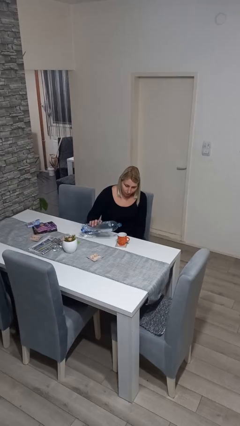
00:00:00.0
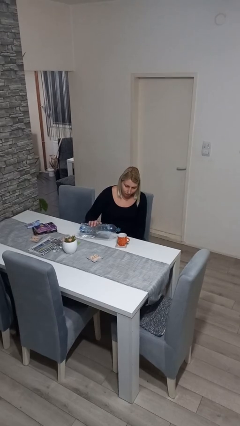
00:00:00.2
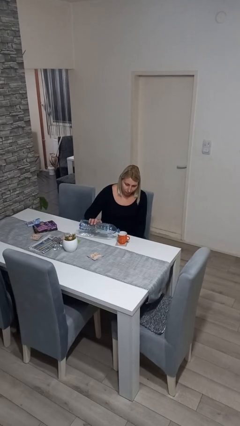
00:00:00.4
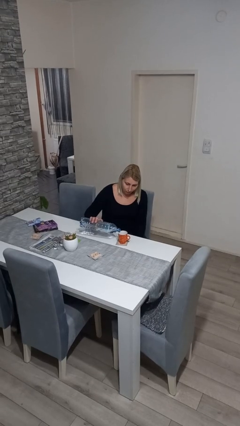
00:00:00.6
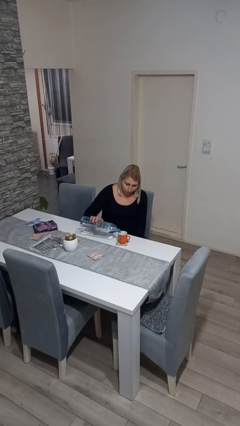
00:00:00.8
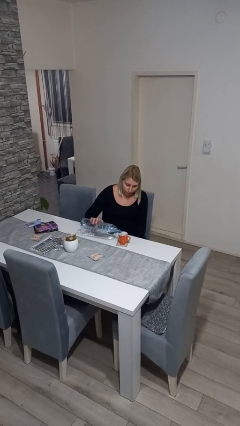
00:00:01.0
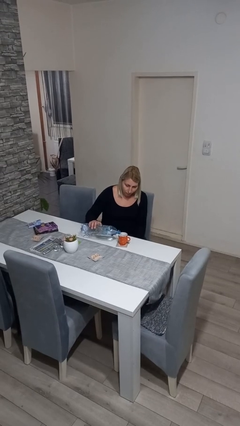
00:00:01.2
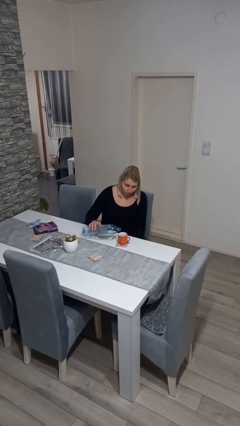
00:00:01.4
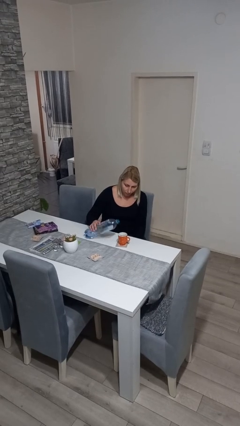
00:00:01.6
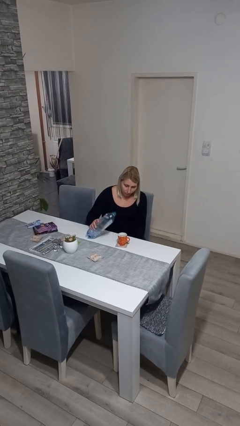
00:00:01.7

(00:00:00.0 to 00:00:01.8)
person pours liquid into cup

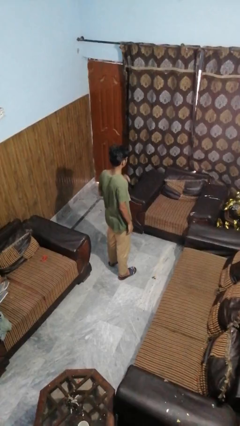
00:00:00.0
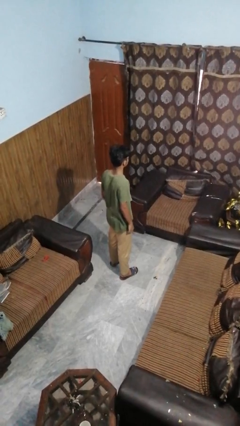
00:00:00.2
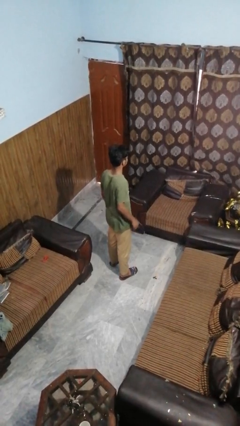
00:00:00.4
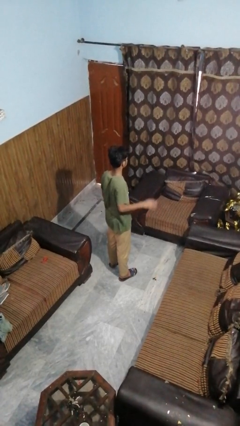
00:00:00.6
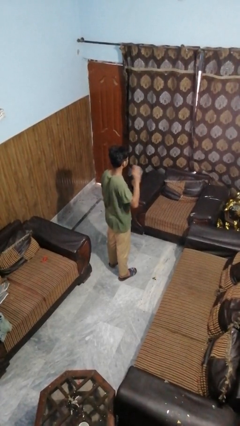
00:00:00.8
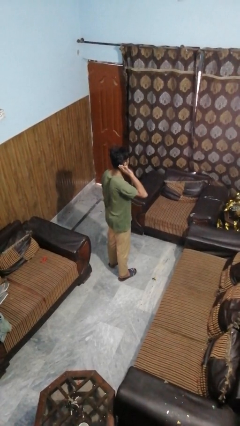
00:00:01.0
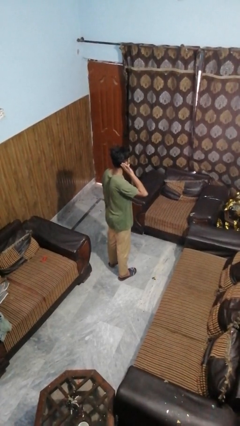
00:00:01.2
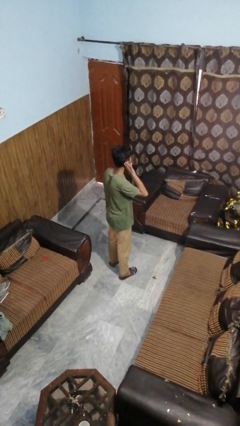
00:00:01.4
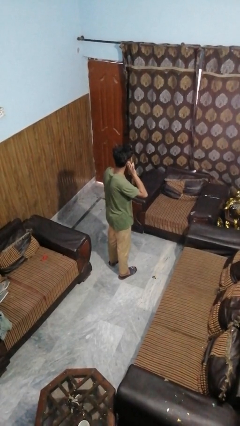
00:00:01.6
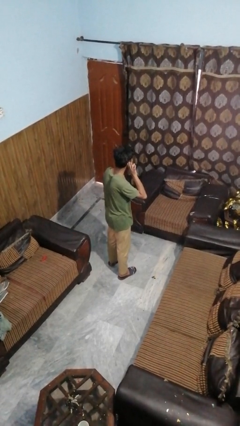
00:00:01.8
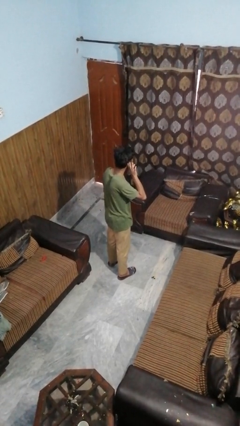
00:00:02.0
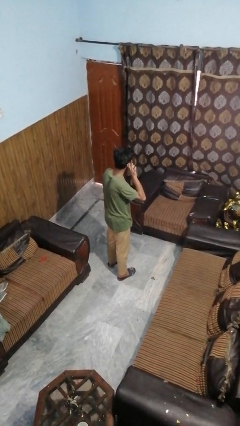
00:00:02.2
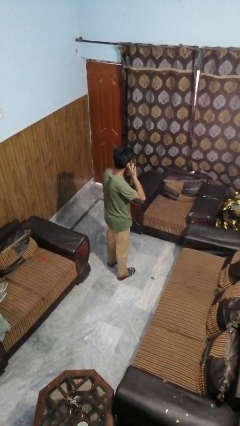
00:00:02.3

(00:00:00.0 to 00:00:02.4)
person gestures listen closely

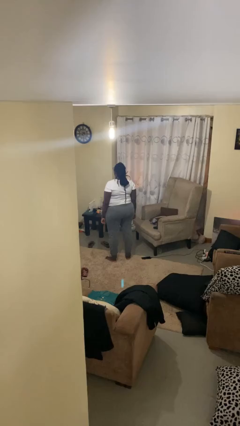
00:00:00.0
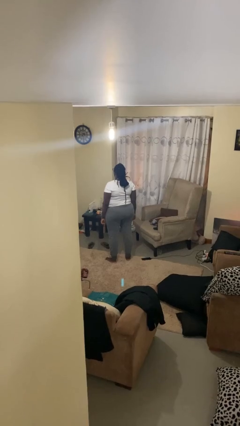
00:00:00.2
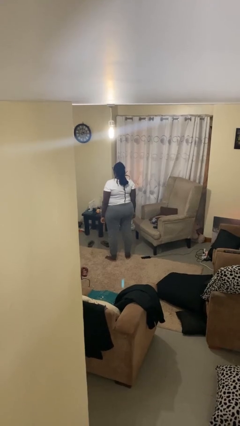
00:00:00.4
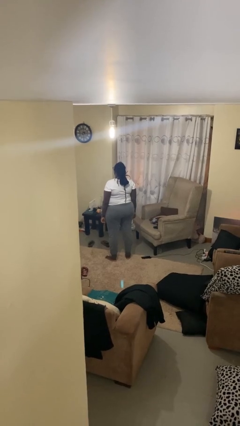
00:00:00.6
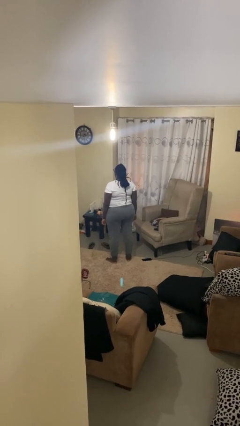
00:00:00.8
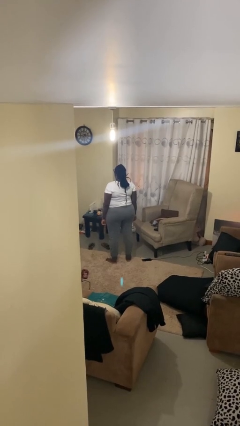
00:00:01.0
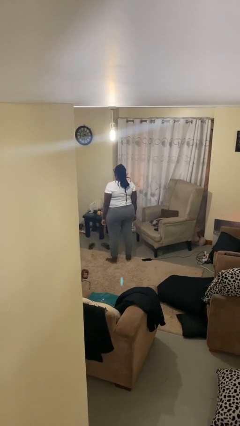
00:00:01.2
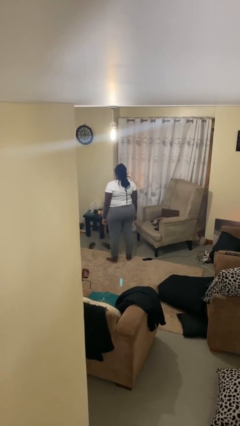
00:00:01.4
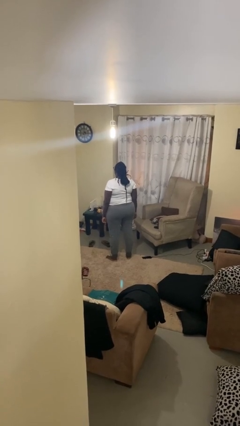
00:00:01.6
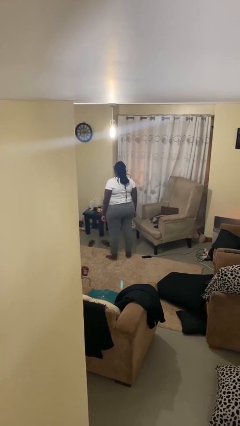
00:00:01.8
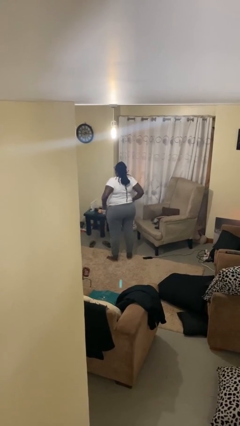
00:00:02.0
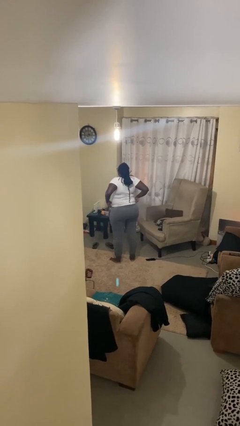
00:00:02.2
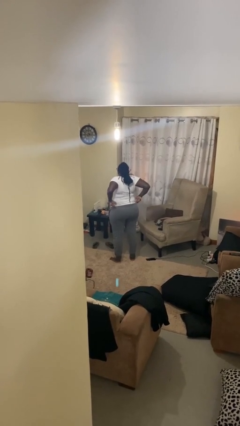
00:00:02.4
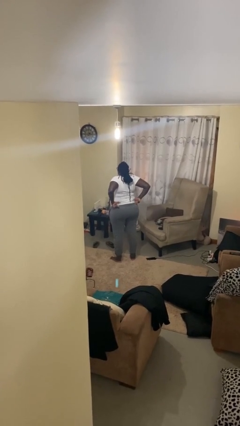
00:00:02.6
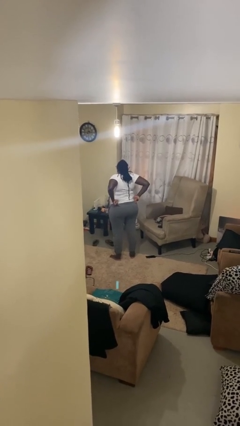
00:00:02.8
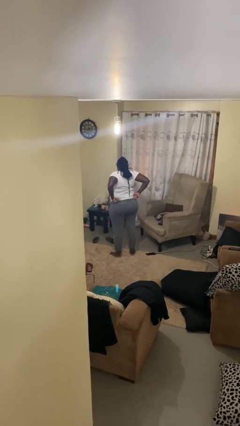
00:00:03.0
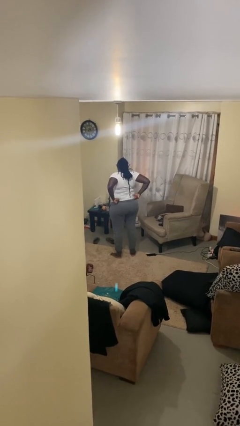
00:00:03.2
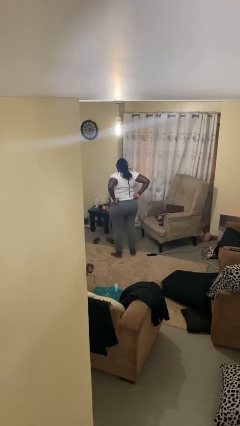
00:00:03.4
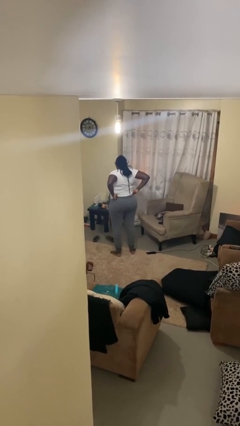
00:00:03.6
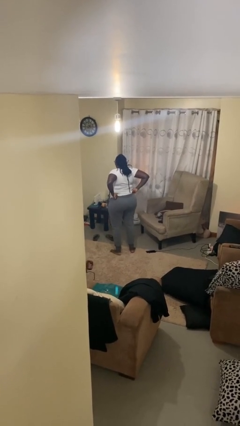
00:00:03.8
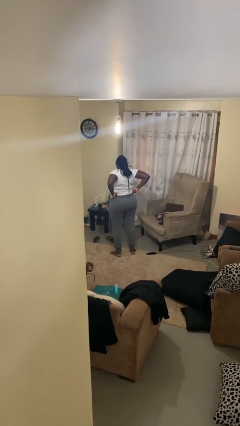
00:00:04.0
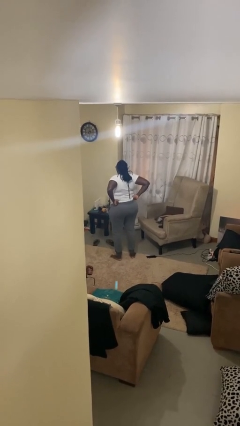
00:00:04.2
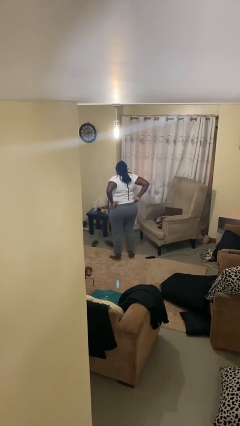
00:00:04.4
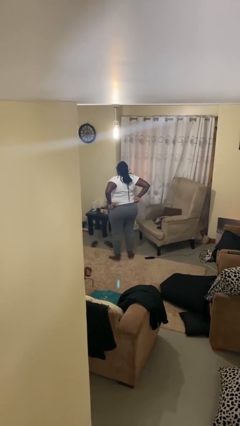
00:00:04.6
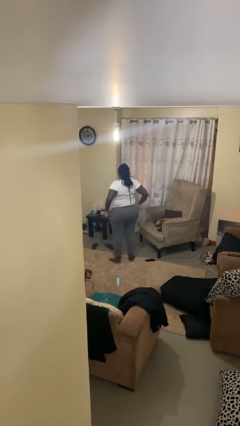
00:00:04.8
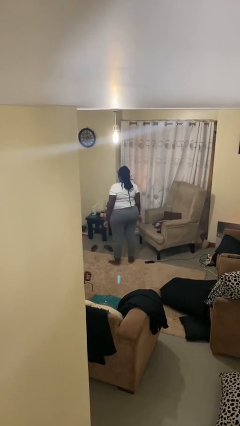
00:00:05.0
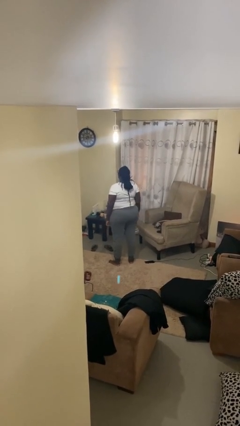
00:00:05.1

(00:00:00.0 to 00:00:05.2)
person hikes up pants

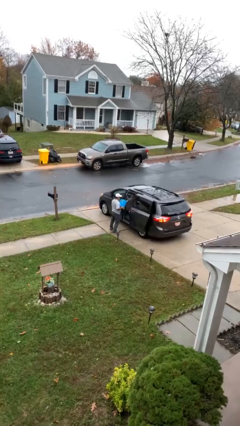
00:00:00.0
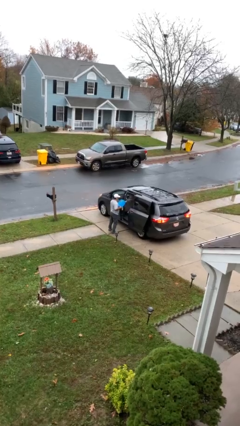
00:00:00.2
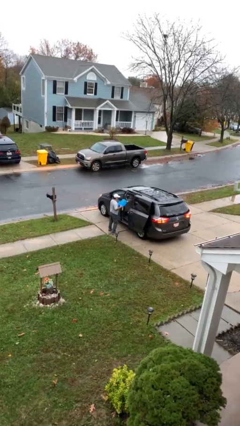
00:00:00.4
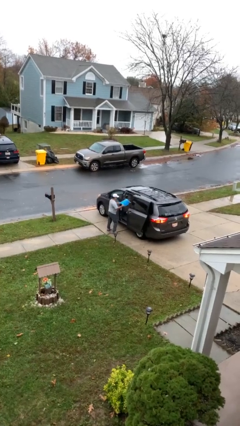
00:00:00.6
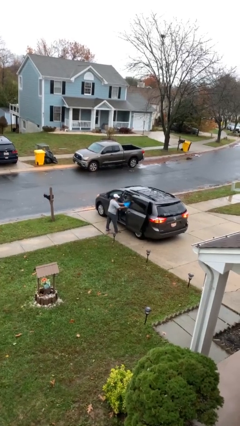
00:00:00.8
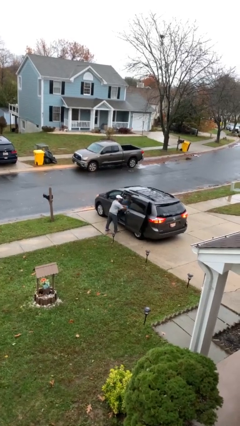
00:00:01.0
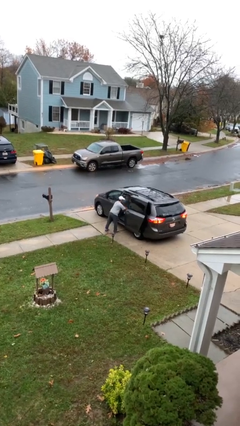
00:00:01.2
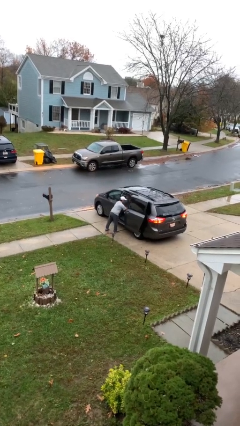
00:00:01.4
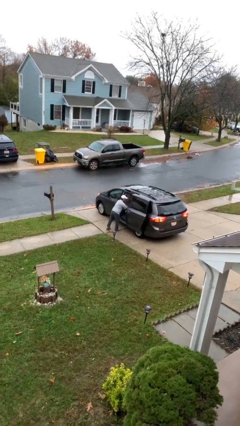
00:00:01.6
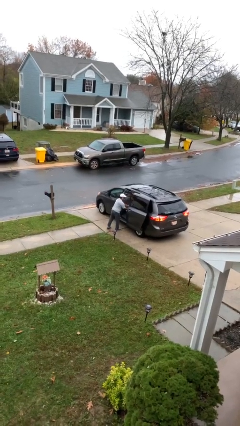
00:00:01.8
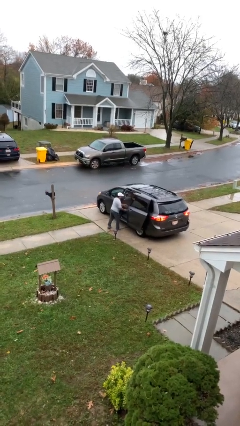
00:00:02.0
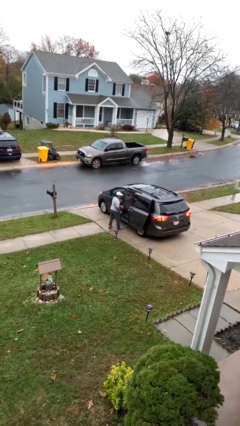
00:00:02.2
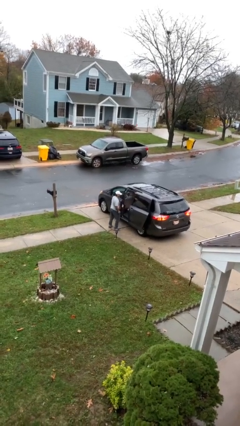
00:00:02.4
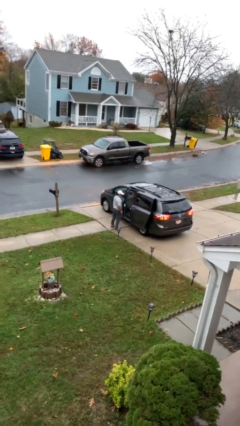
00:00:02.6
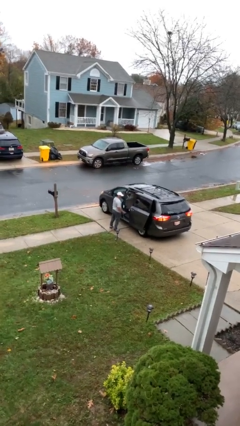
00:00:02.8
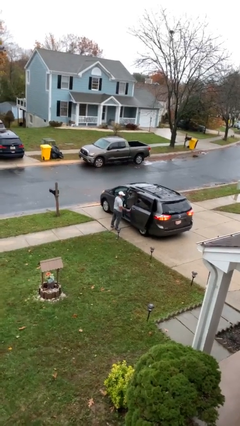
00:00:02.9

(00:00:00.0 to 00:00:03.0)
person loads car

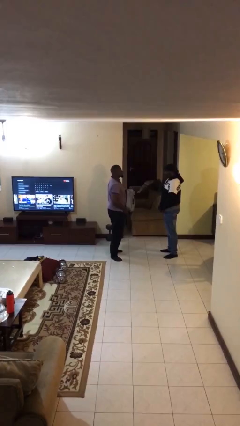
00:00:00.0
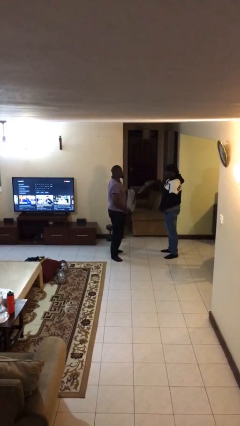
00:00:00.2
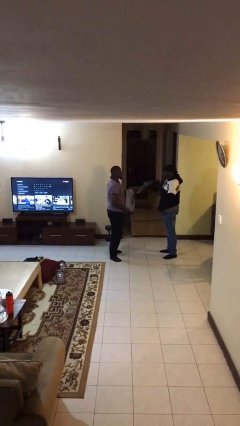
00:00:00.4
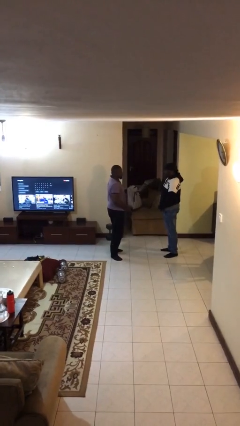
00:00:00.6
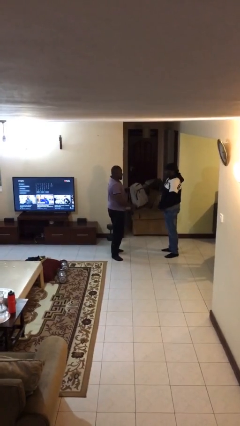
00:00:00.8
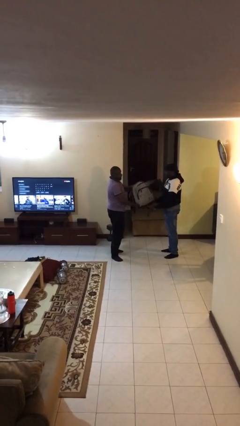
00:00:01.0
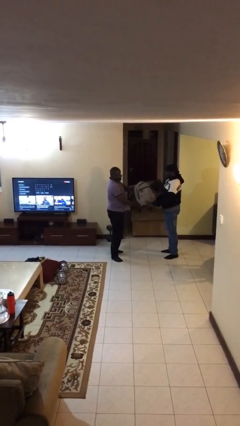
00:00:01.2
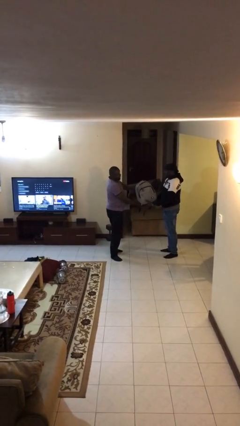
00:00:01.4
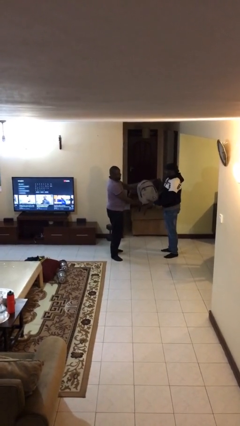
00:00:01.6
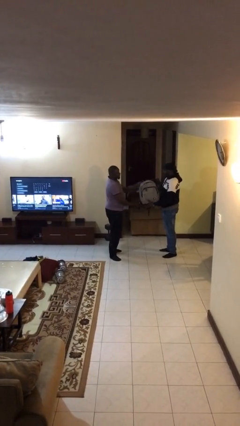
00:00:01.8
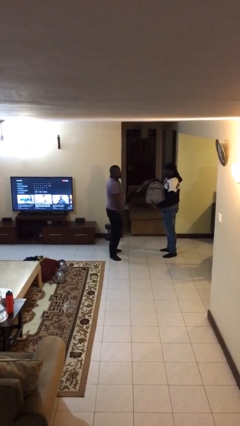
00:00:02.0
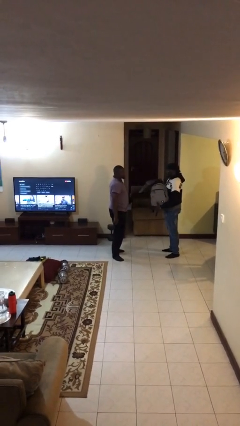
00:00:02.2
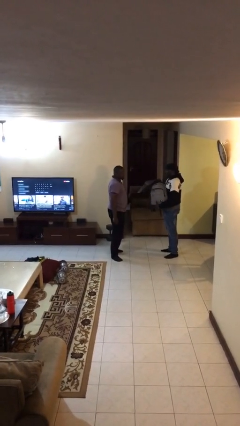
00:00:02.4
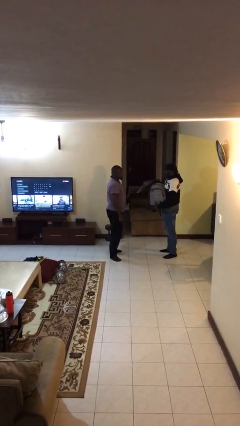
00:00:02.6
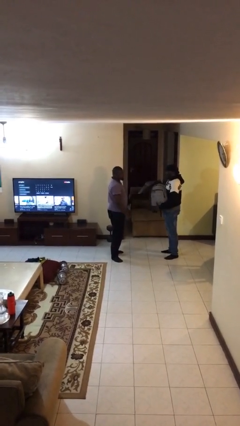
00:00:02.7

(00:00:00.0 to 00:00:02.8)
person transfers object to person

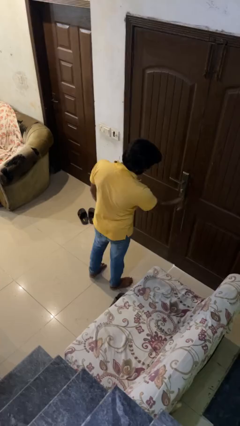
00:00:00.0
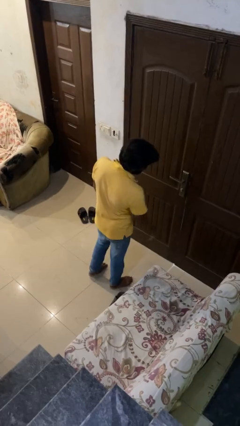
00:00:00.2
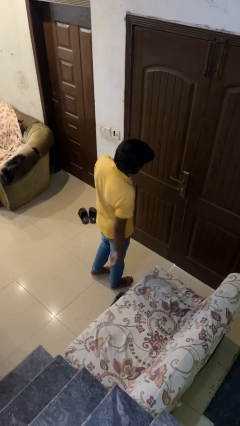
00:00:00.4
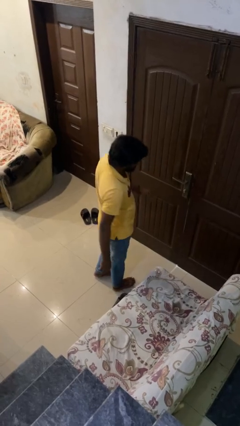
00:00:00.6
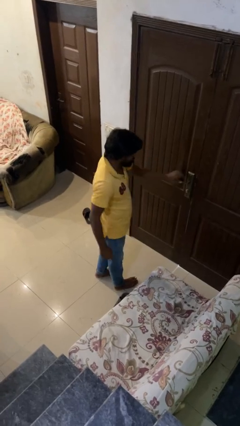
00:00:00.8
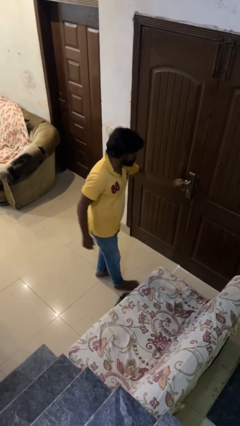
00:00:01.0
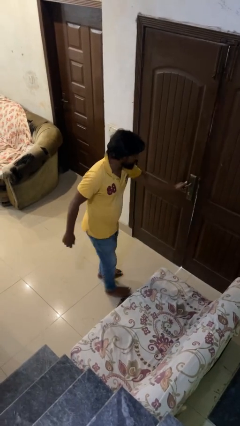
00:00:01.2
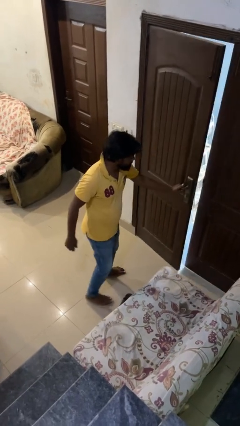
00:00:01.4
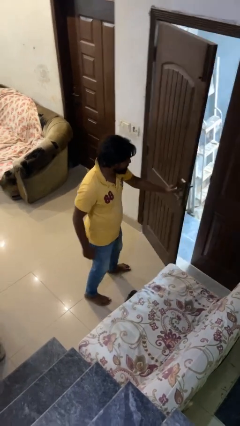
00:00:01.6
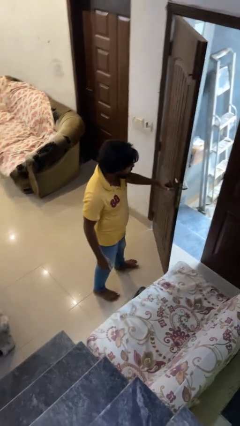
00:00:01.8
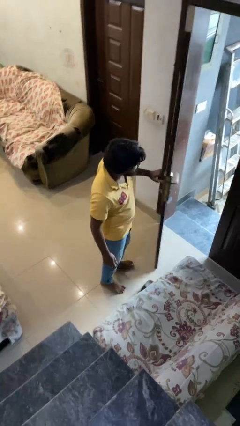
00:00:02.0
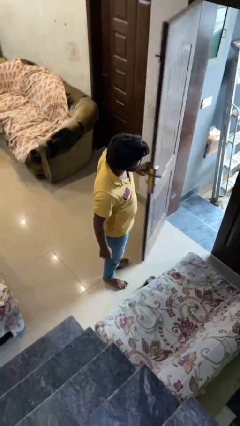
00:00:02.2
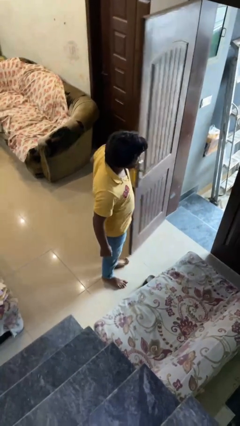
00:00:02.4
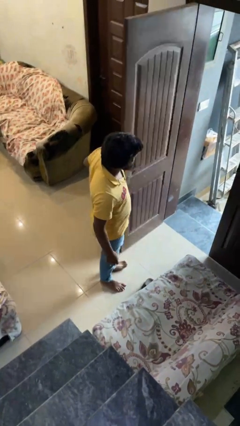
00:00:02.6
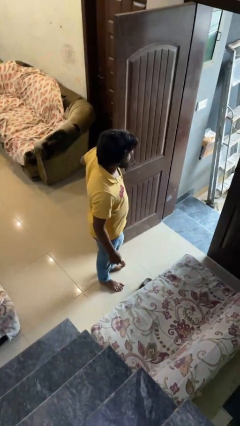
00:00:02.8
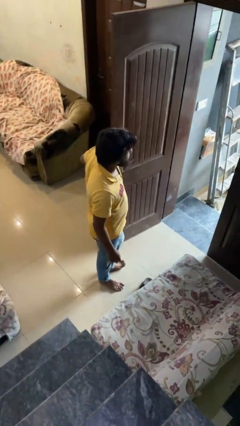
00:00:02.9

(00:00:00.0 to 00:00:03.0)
person opens facility door
